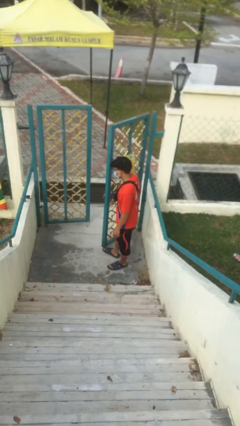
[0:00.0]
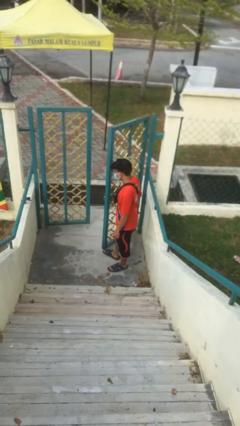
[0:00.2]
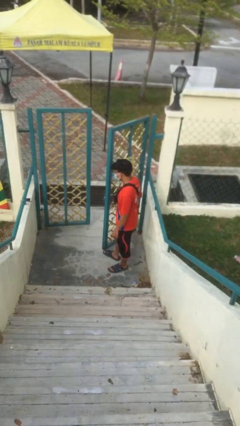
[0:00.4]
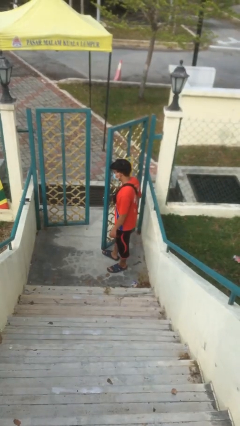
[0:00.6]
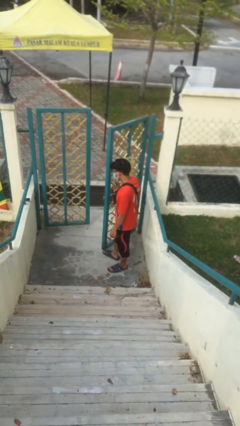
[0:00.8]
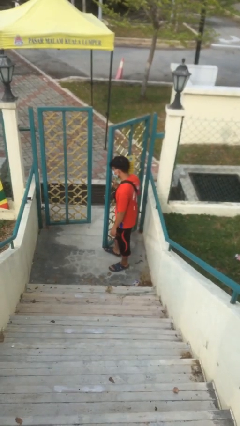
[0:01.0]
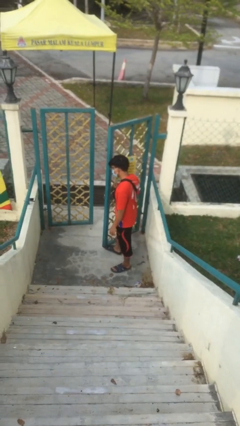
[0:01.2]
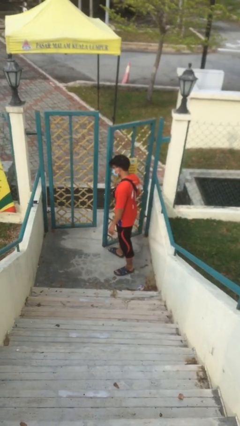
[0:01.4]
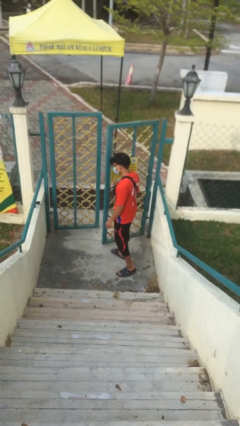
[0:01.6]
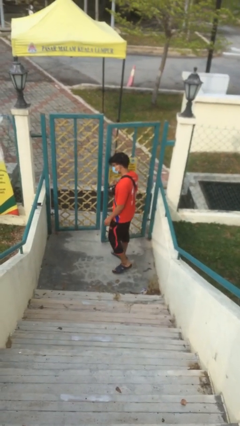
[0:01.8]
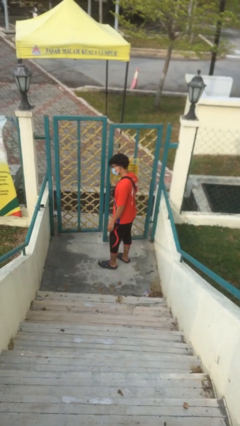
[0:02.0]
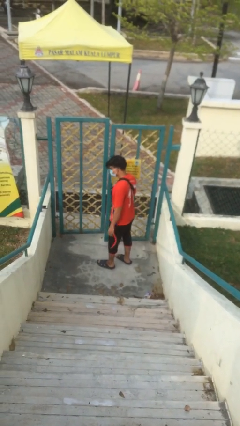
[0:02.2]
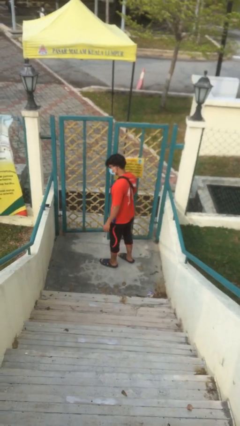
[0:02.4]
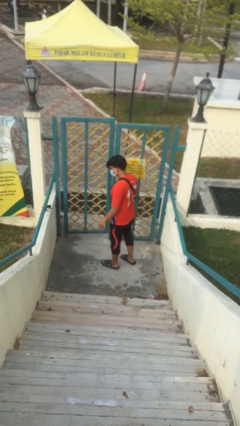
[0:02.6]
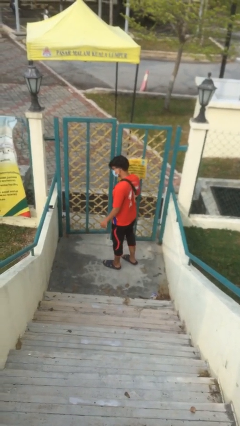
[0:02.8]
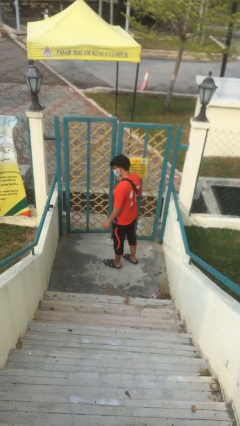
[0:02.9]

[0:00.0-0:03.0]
person closes facility door

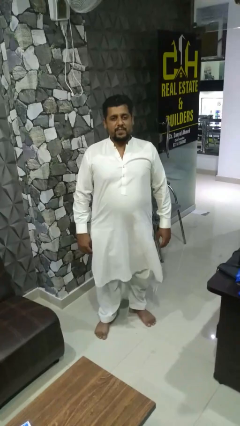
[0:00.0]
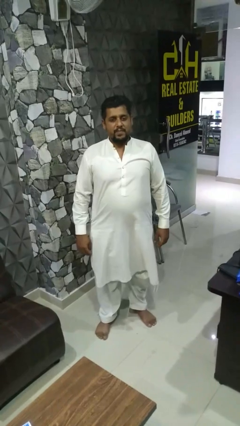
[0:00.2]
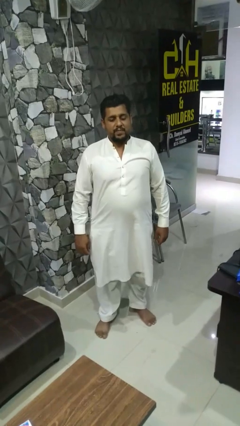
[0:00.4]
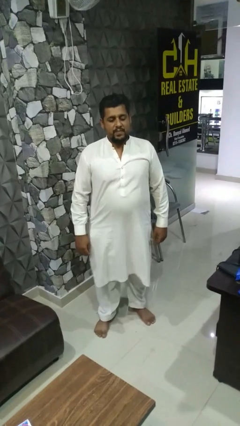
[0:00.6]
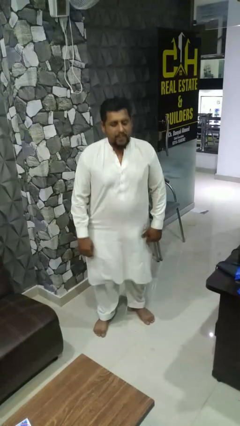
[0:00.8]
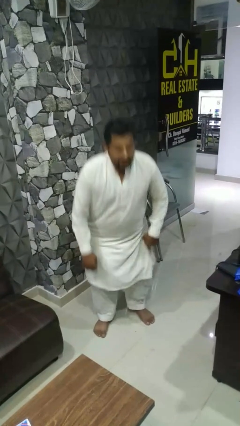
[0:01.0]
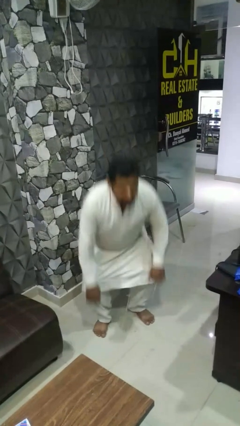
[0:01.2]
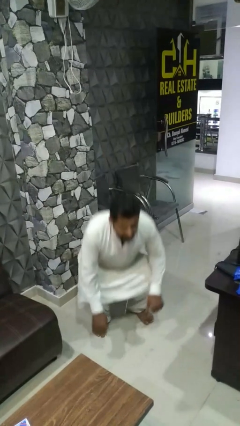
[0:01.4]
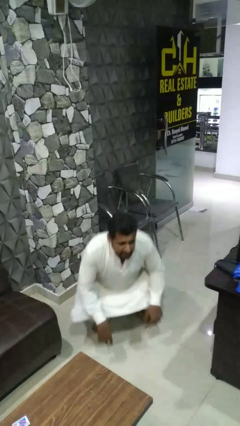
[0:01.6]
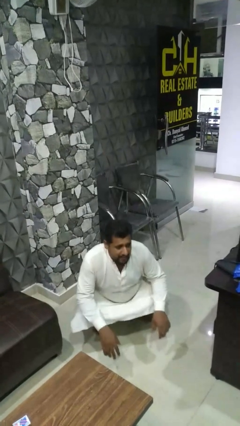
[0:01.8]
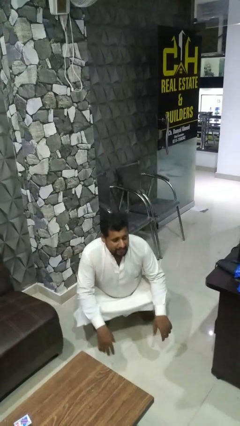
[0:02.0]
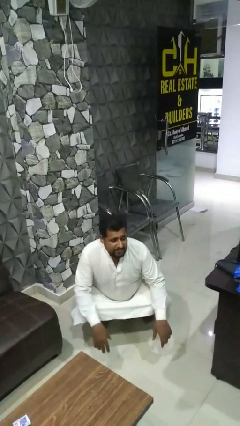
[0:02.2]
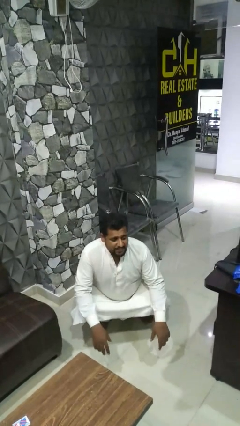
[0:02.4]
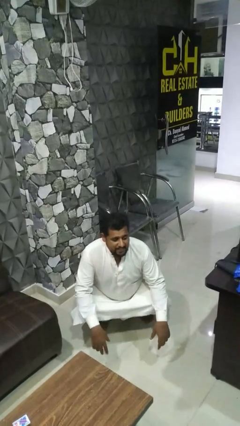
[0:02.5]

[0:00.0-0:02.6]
person squats

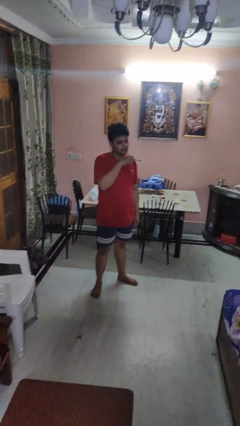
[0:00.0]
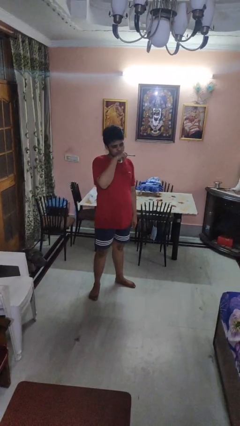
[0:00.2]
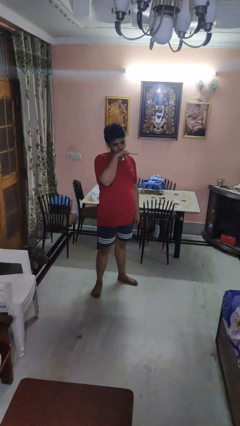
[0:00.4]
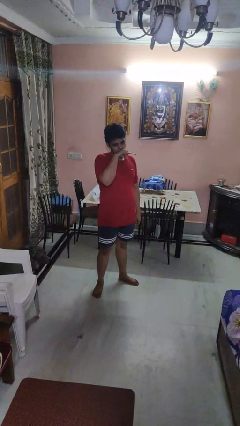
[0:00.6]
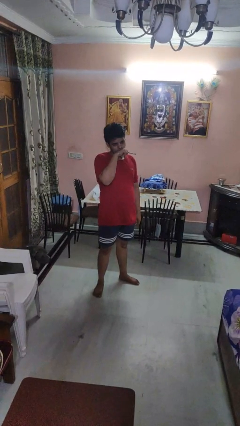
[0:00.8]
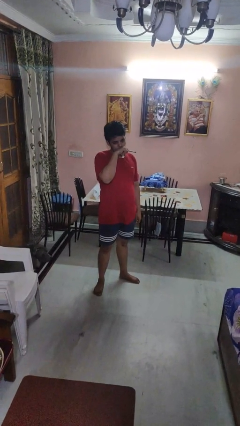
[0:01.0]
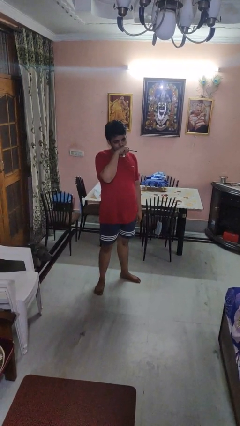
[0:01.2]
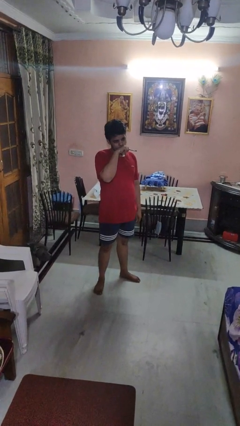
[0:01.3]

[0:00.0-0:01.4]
person vapes

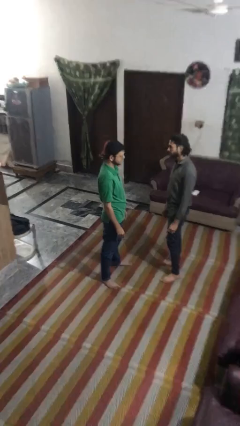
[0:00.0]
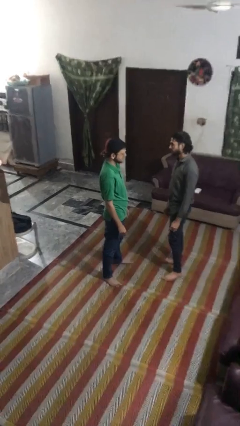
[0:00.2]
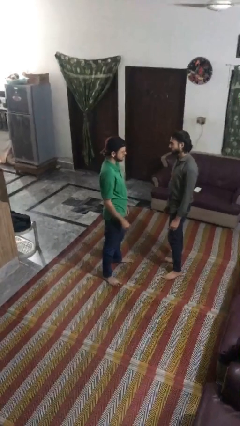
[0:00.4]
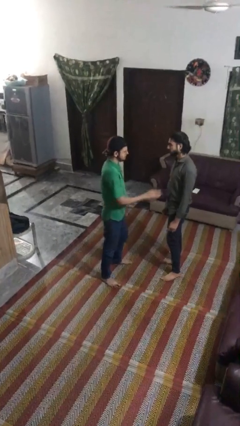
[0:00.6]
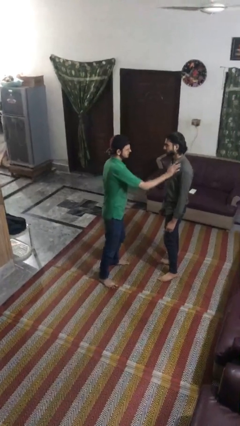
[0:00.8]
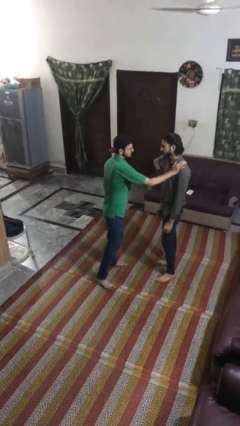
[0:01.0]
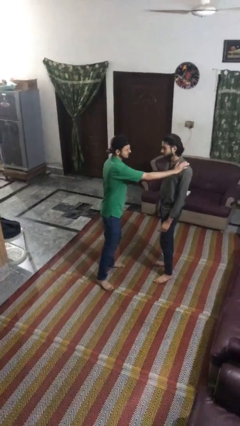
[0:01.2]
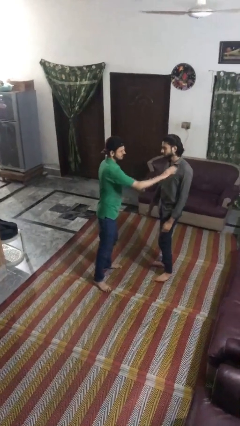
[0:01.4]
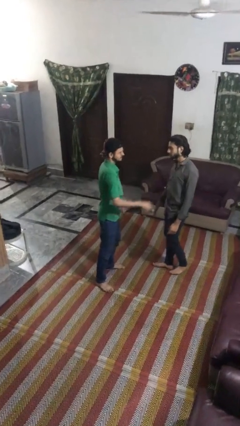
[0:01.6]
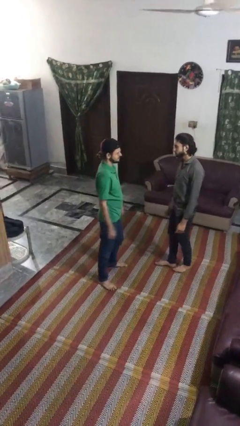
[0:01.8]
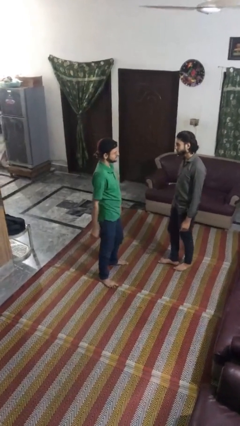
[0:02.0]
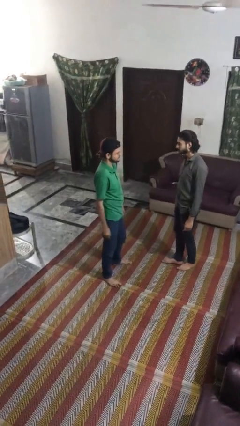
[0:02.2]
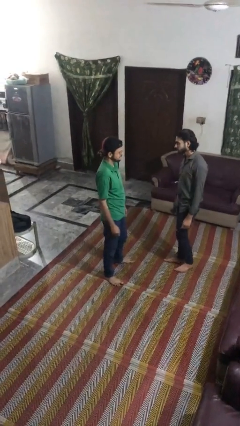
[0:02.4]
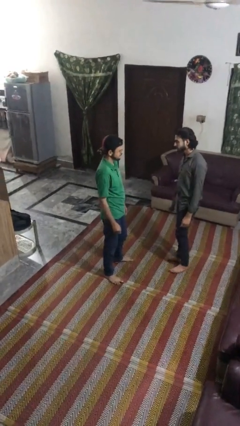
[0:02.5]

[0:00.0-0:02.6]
person shoves person

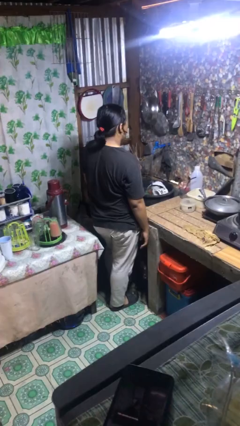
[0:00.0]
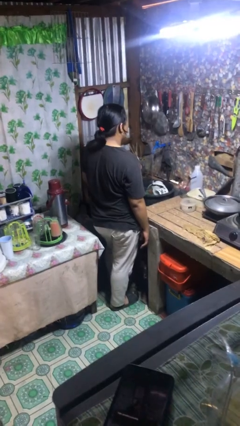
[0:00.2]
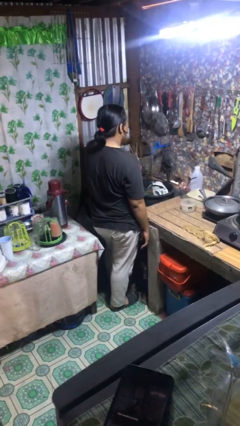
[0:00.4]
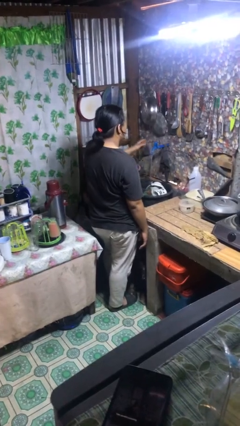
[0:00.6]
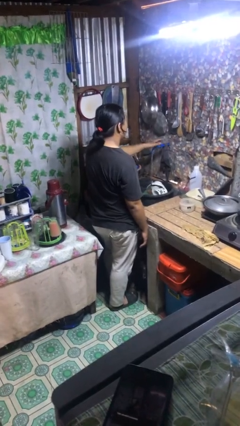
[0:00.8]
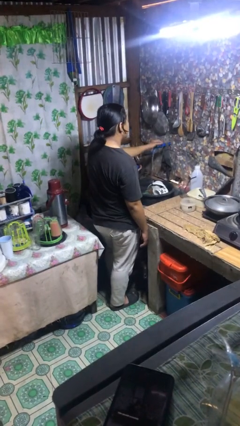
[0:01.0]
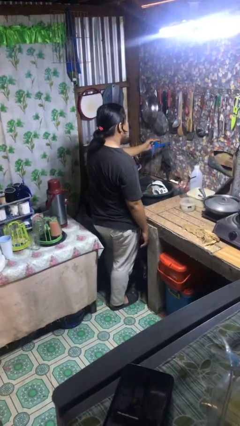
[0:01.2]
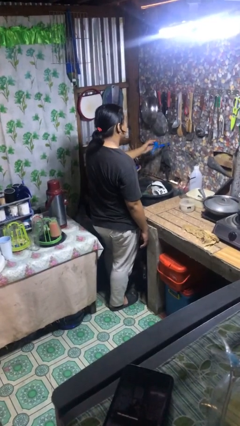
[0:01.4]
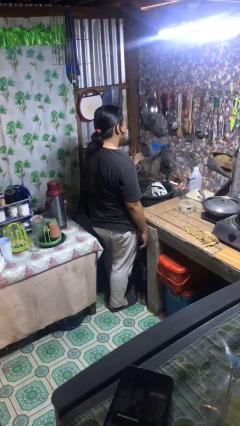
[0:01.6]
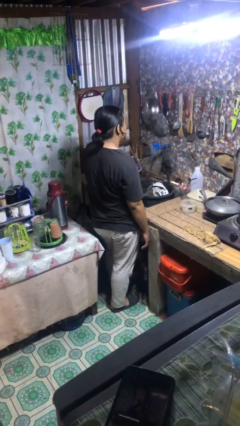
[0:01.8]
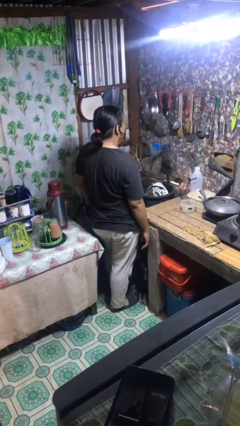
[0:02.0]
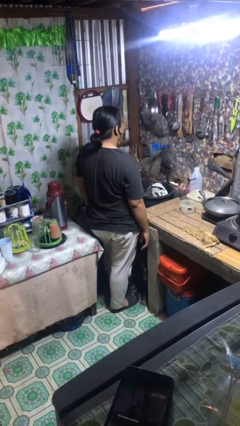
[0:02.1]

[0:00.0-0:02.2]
person turns off faucet

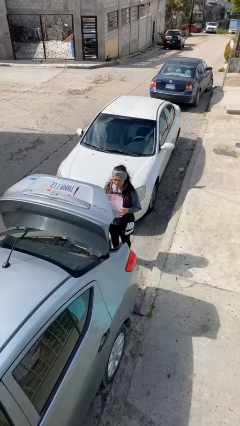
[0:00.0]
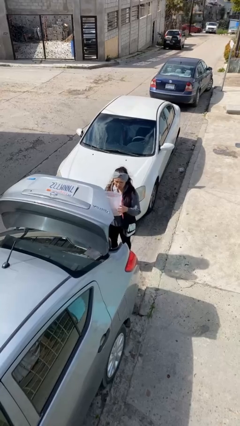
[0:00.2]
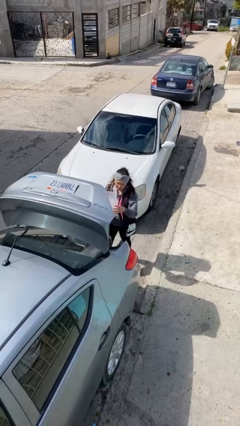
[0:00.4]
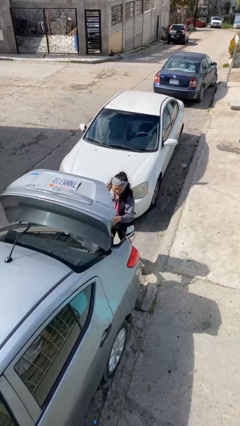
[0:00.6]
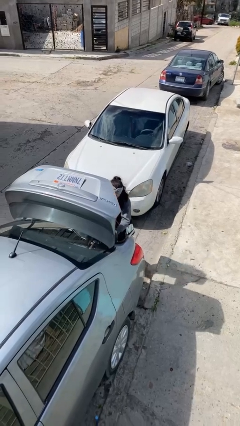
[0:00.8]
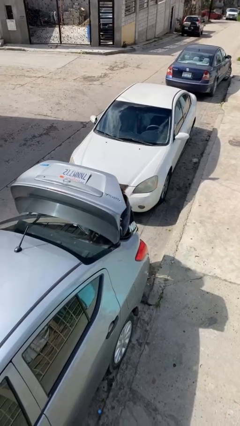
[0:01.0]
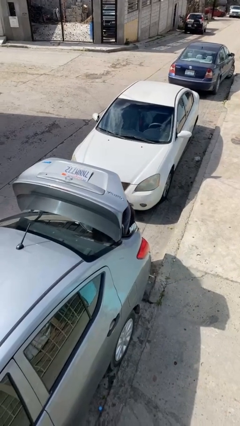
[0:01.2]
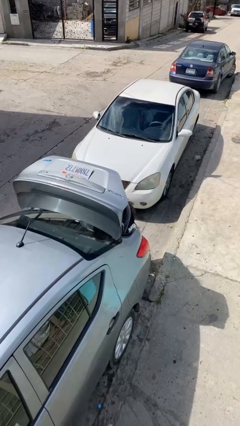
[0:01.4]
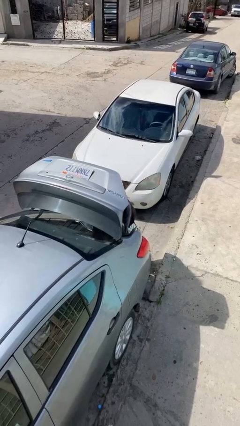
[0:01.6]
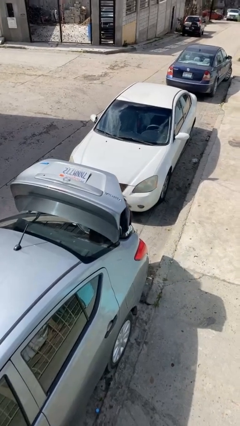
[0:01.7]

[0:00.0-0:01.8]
person loads car

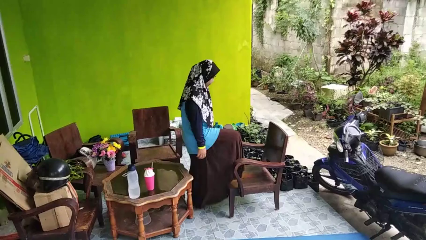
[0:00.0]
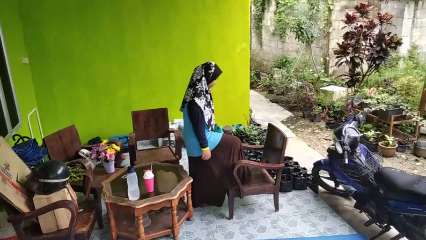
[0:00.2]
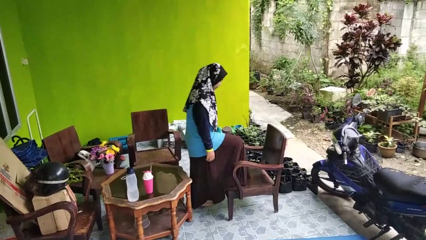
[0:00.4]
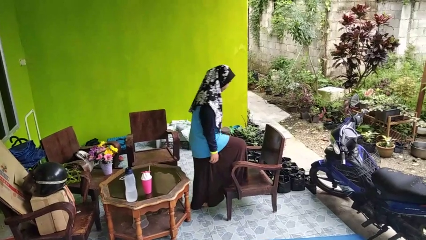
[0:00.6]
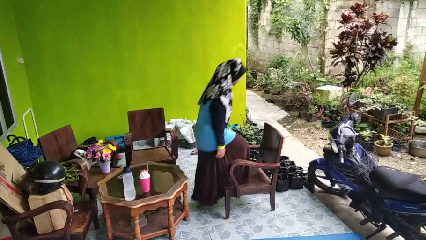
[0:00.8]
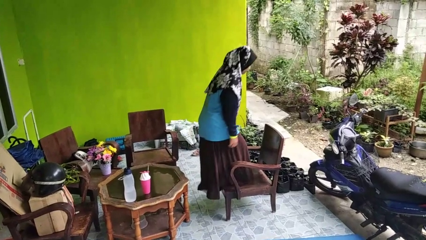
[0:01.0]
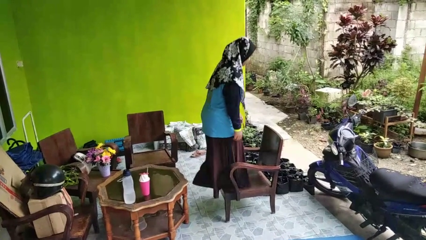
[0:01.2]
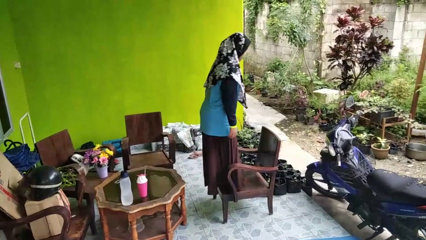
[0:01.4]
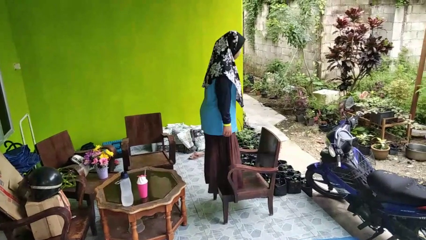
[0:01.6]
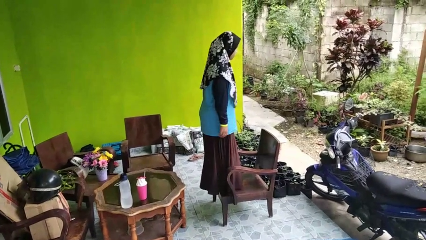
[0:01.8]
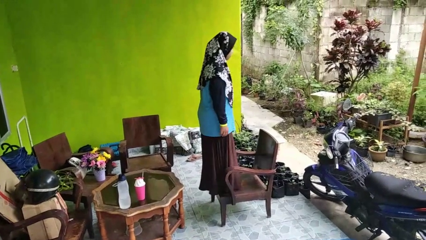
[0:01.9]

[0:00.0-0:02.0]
person climbs on chair

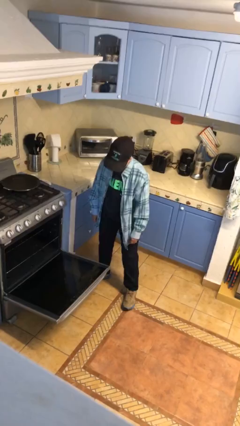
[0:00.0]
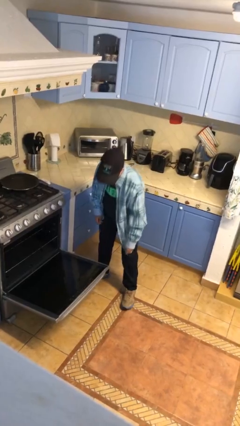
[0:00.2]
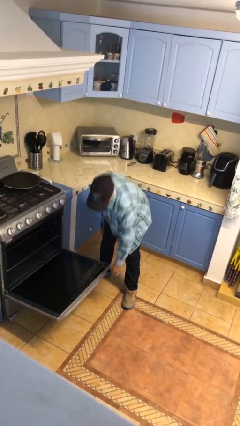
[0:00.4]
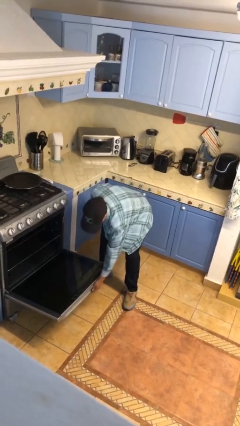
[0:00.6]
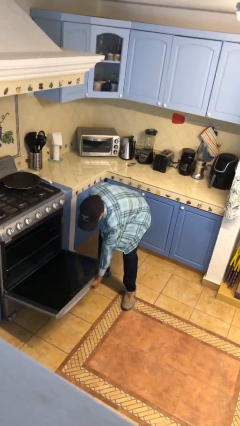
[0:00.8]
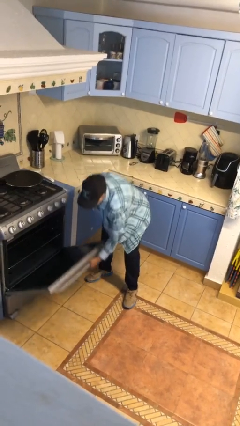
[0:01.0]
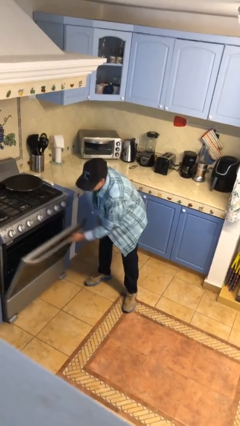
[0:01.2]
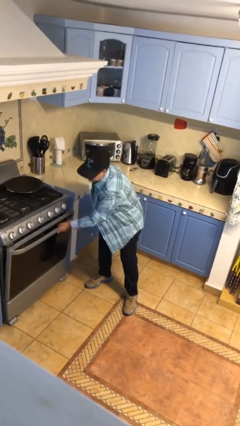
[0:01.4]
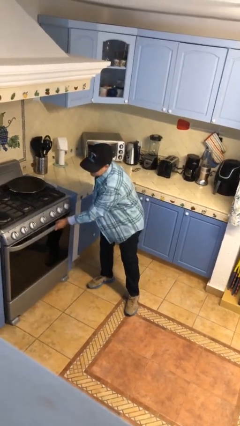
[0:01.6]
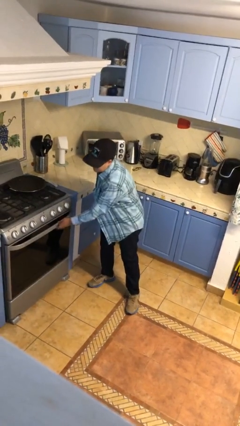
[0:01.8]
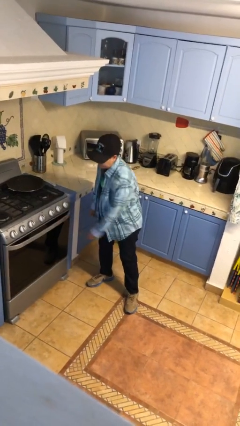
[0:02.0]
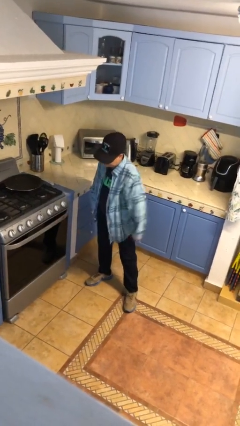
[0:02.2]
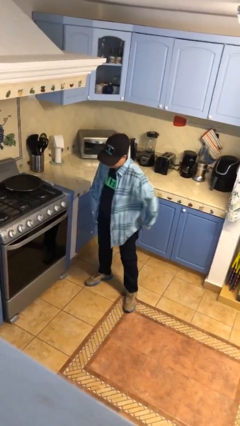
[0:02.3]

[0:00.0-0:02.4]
person closes oven door
